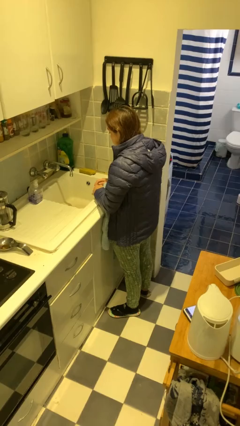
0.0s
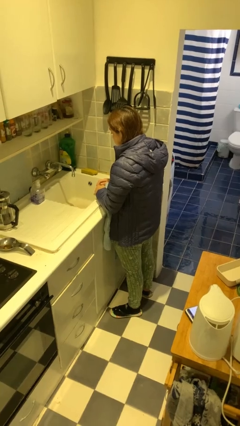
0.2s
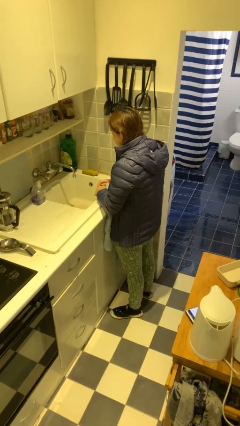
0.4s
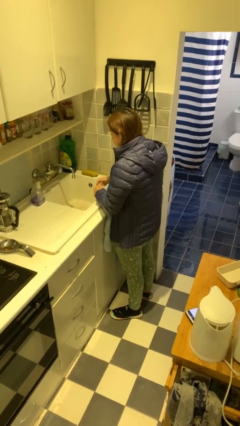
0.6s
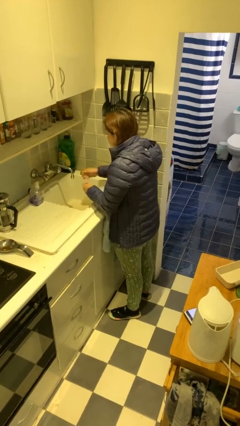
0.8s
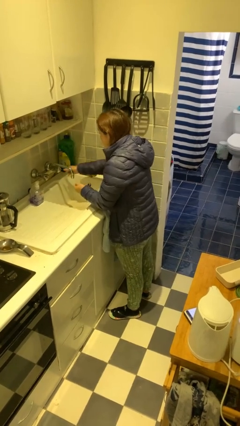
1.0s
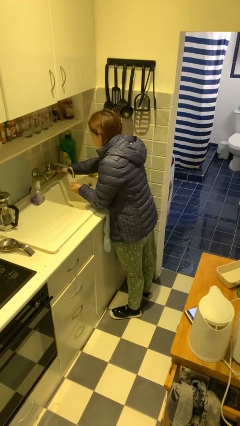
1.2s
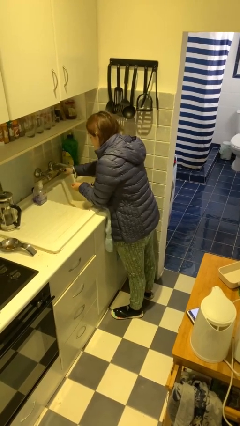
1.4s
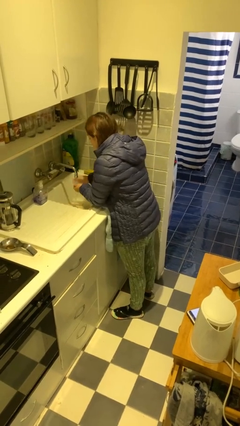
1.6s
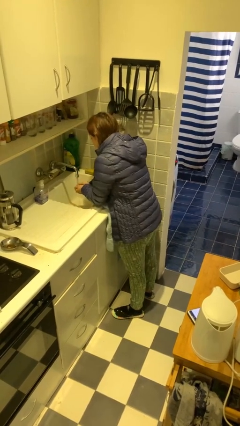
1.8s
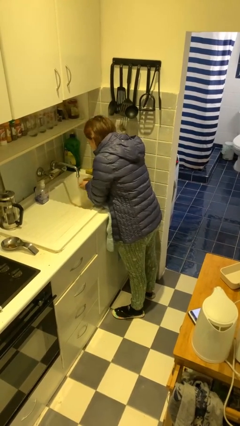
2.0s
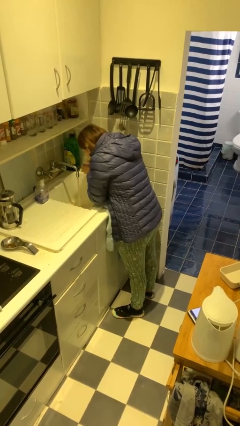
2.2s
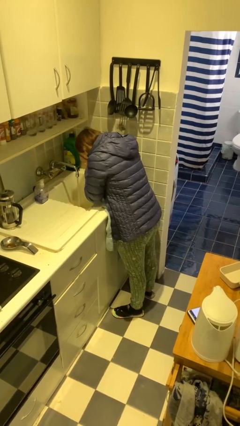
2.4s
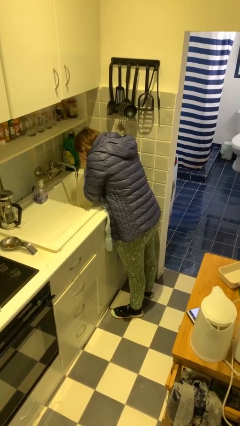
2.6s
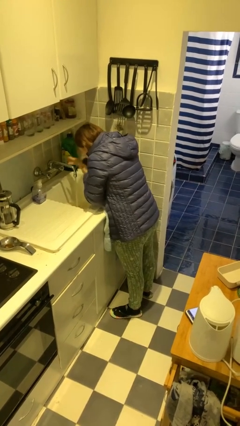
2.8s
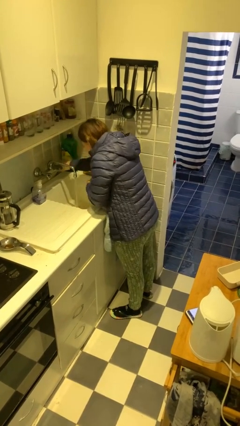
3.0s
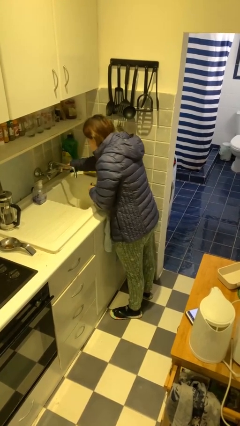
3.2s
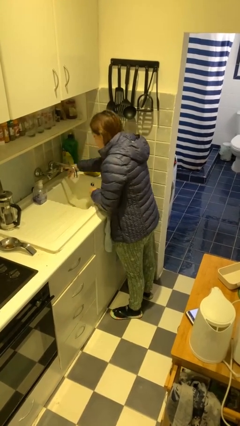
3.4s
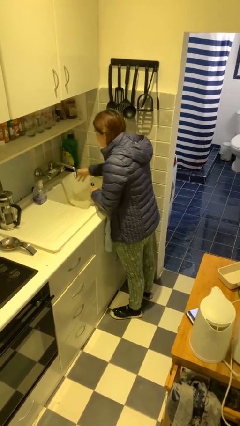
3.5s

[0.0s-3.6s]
person washes face

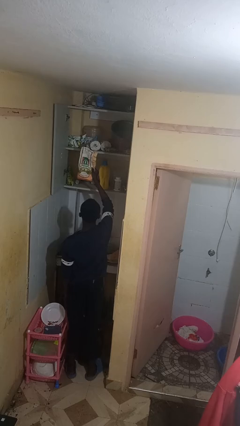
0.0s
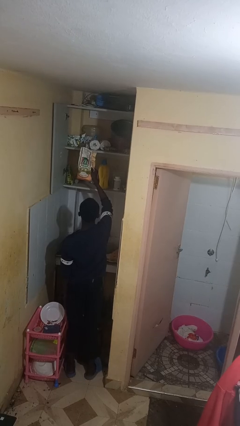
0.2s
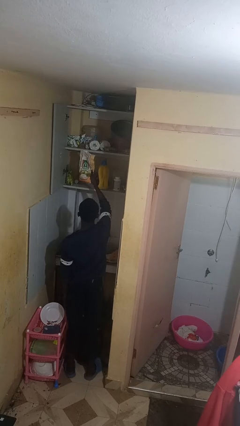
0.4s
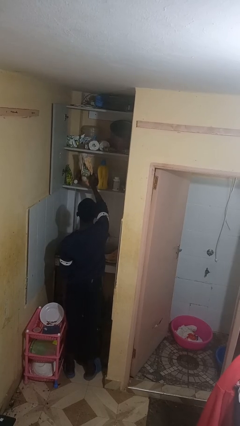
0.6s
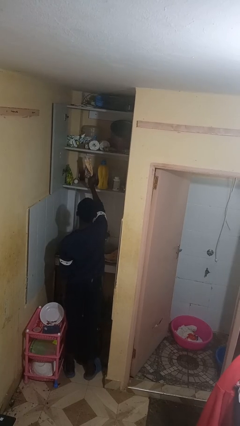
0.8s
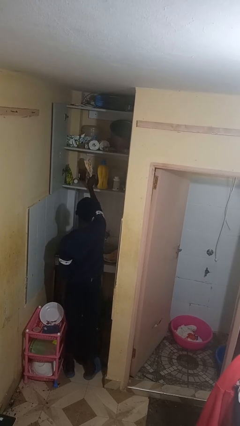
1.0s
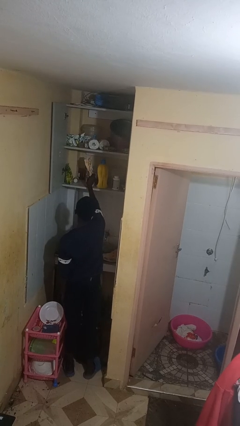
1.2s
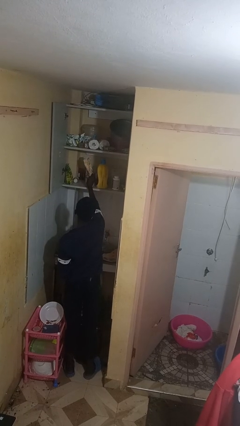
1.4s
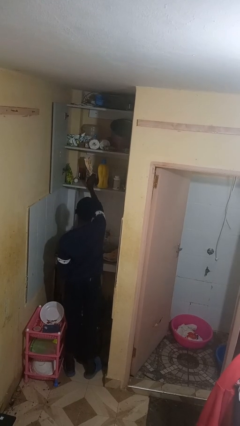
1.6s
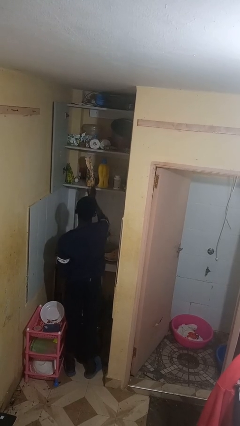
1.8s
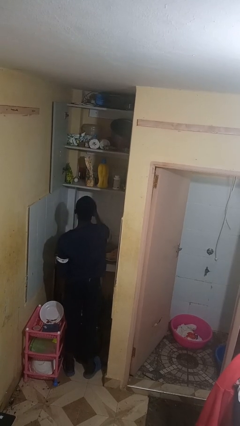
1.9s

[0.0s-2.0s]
person puts object in cabinet

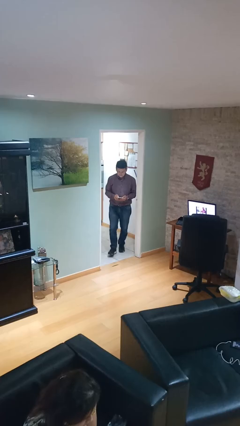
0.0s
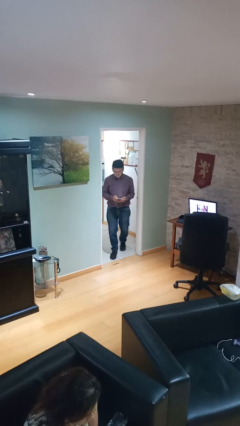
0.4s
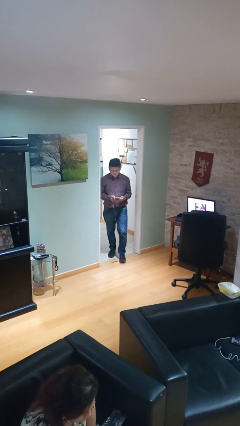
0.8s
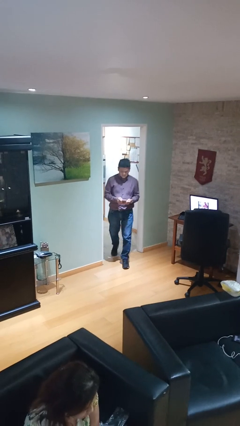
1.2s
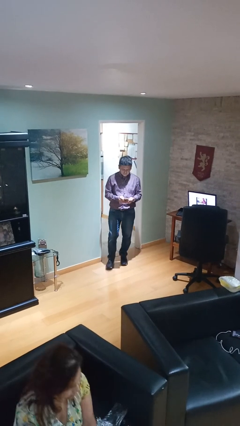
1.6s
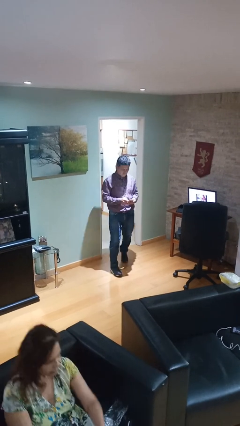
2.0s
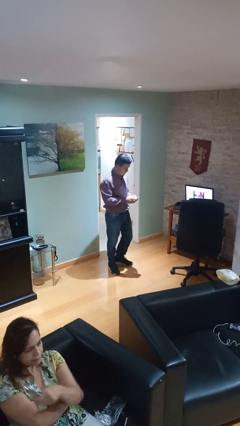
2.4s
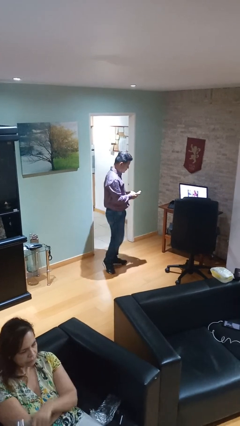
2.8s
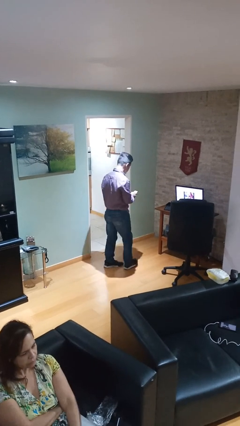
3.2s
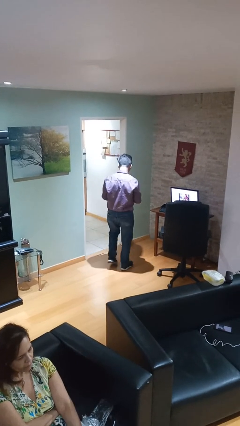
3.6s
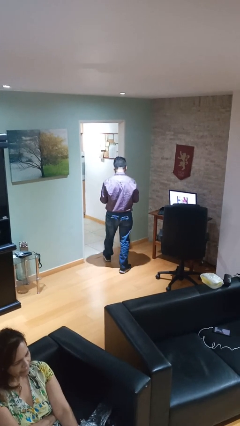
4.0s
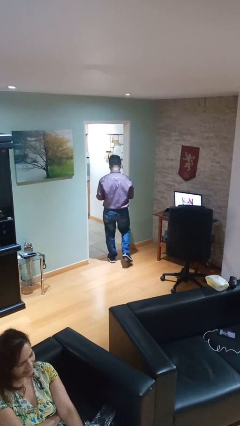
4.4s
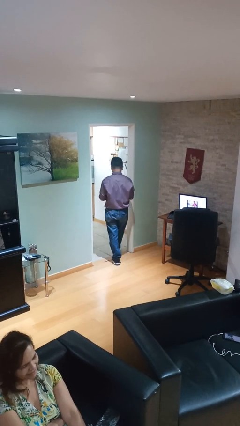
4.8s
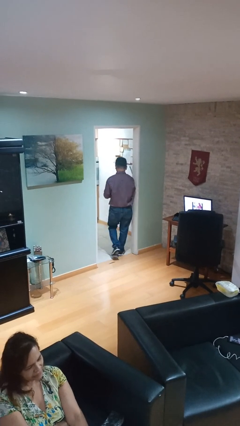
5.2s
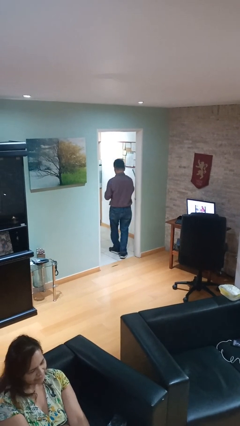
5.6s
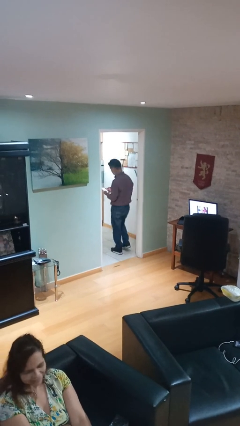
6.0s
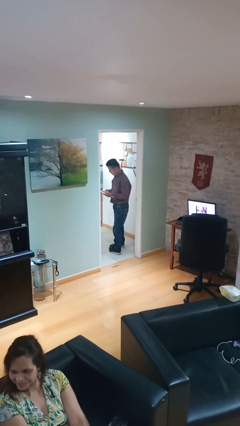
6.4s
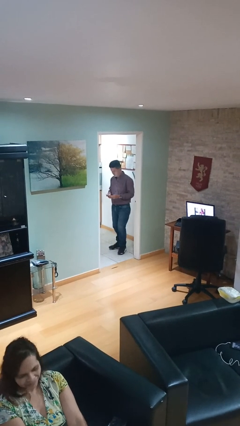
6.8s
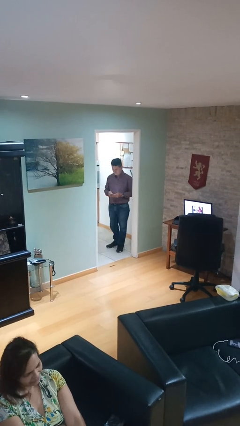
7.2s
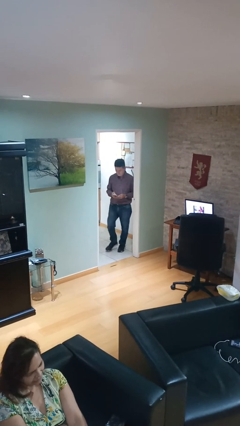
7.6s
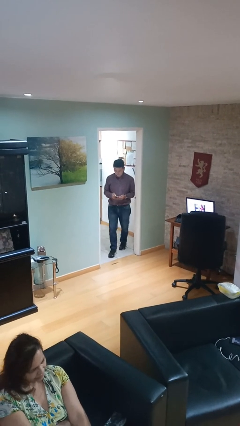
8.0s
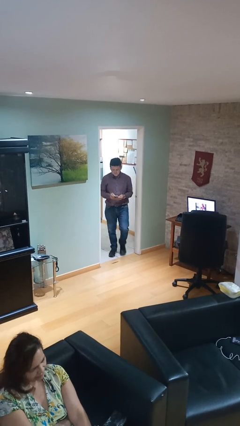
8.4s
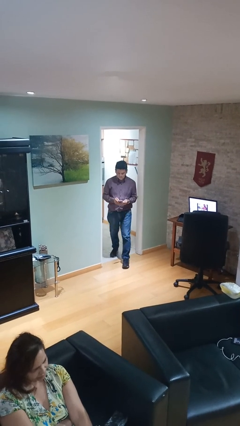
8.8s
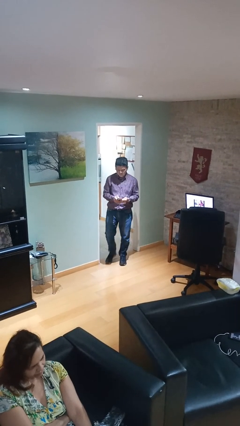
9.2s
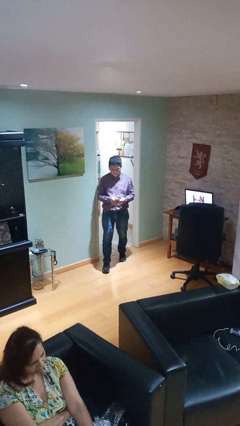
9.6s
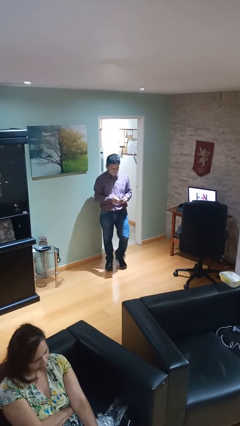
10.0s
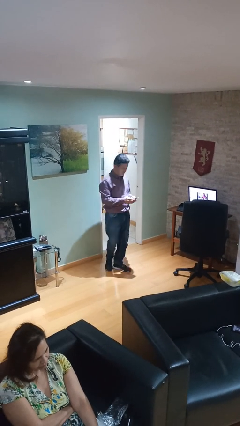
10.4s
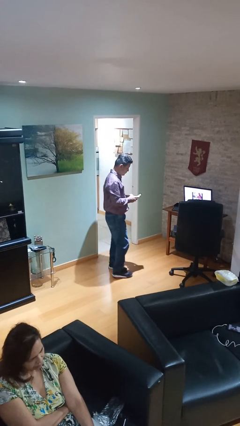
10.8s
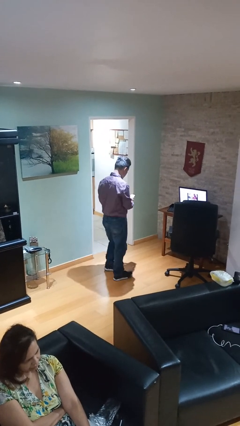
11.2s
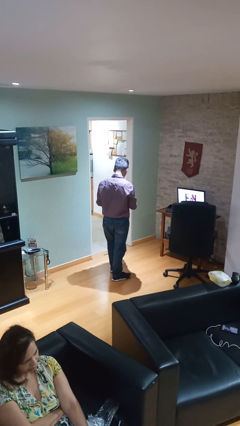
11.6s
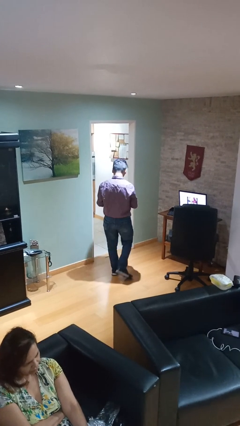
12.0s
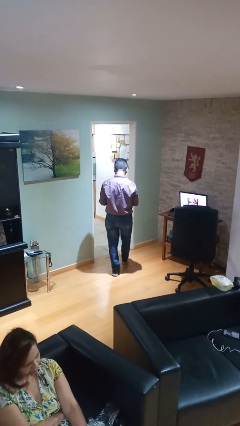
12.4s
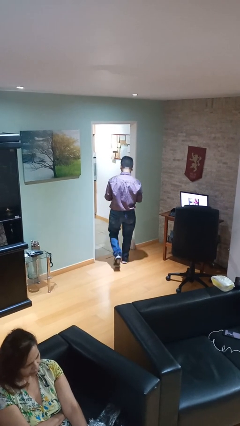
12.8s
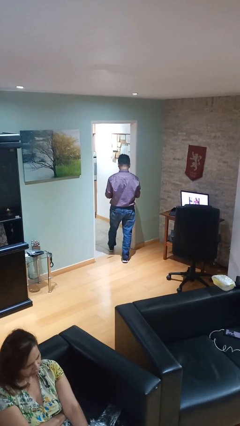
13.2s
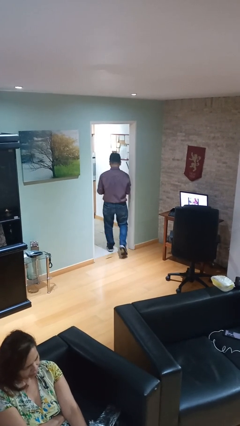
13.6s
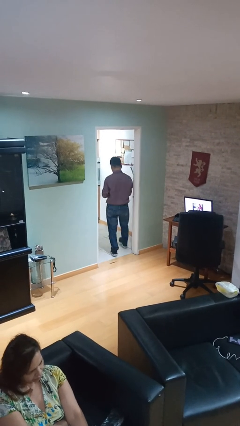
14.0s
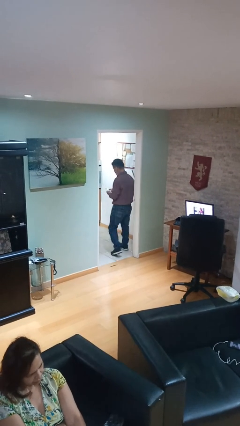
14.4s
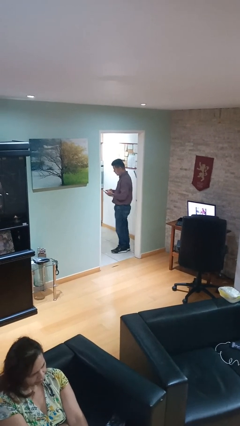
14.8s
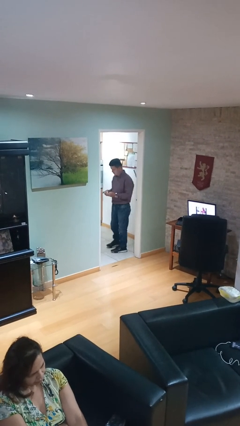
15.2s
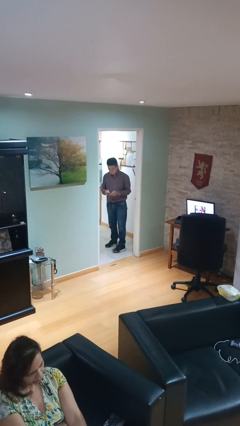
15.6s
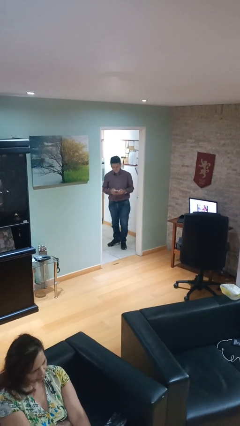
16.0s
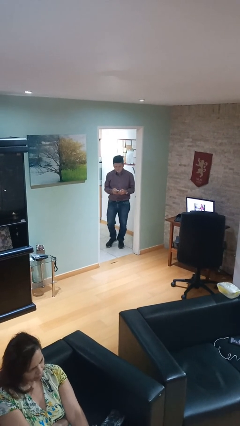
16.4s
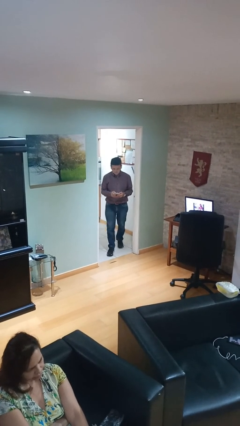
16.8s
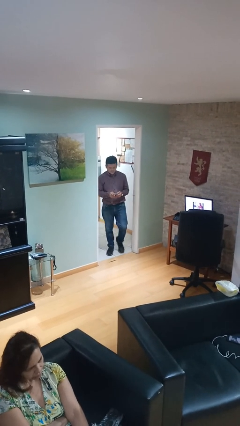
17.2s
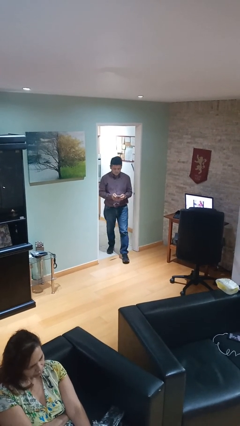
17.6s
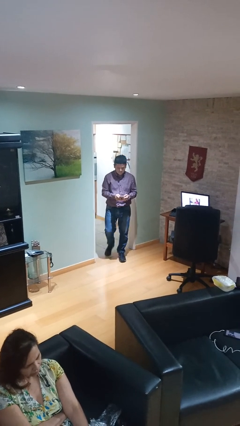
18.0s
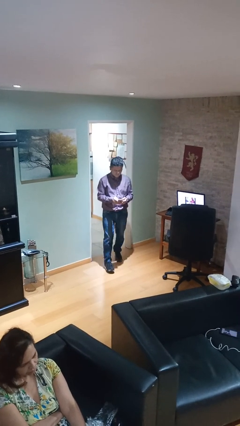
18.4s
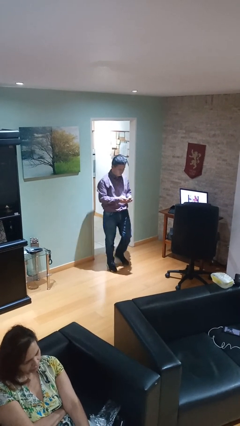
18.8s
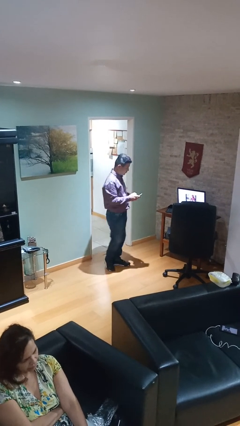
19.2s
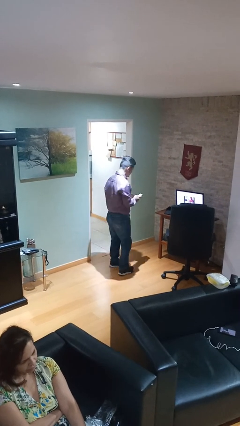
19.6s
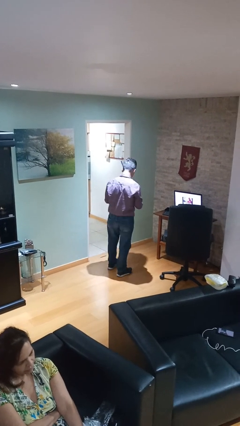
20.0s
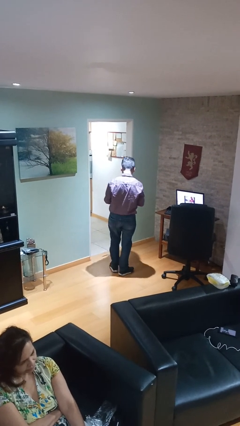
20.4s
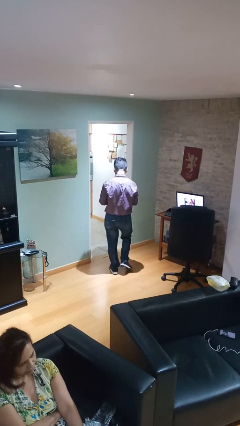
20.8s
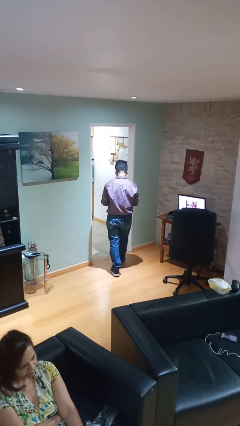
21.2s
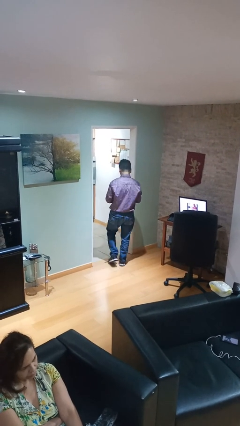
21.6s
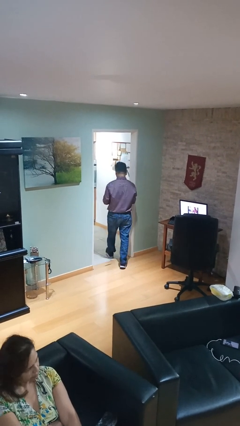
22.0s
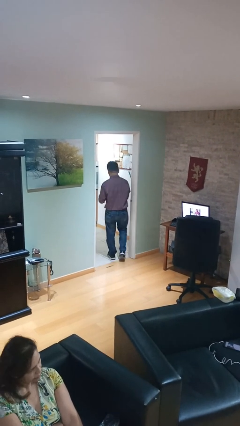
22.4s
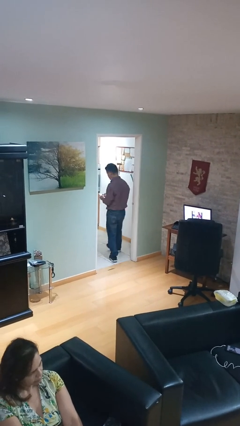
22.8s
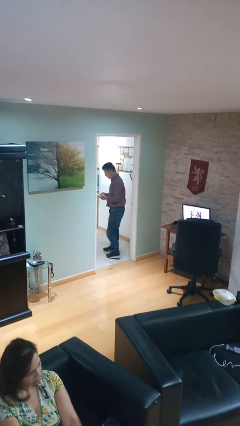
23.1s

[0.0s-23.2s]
person texts on phone

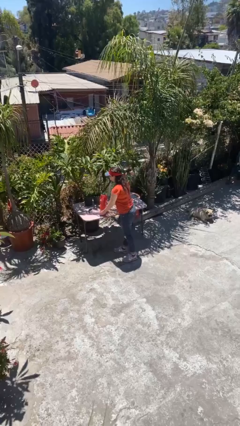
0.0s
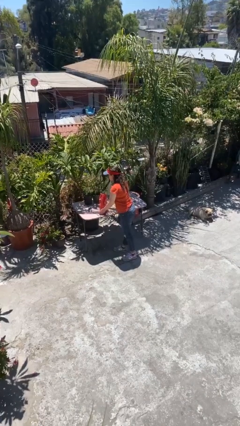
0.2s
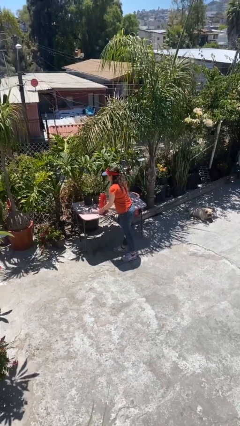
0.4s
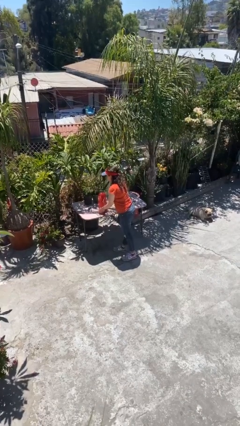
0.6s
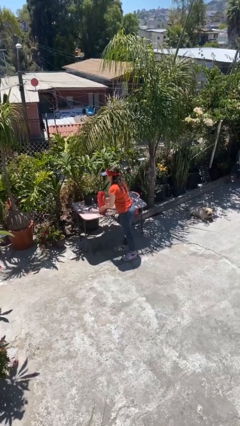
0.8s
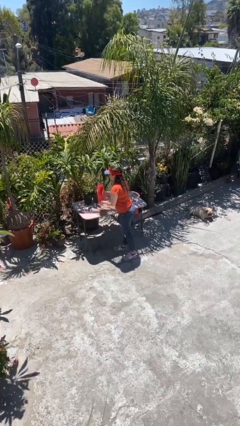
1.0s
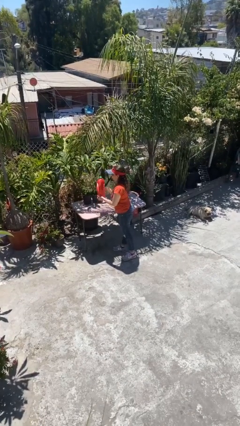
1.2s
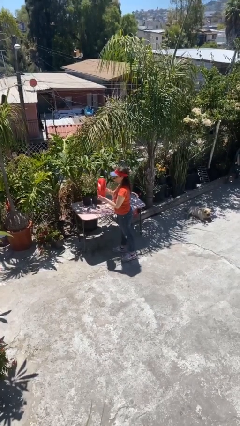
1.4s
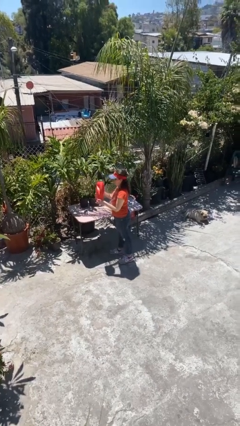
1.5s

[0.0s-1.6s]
person picks up object from table
